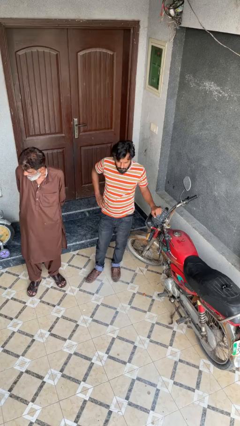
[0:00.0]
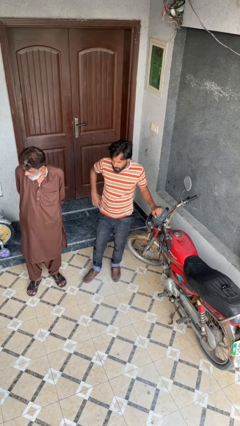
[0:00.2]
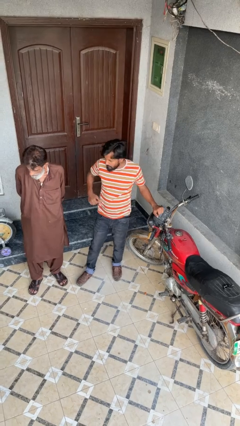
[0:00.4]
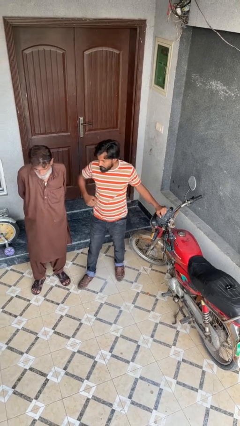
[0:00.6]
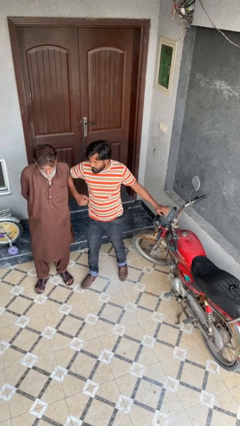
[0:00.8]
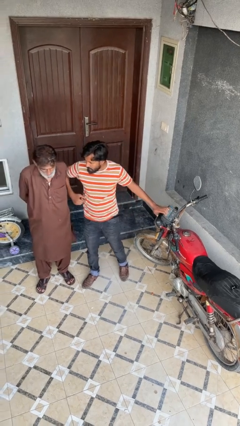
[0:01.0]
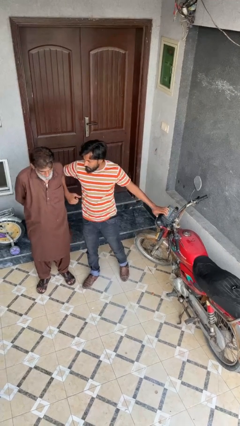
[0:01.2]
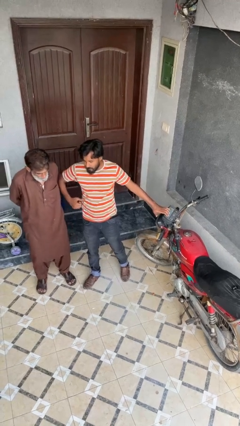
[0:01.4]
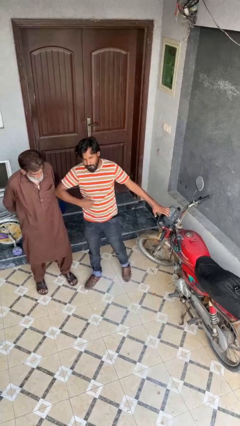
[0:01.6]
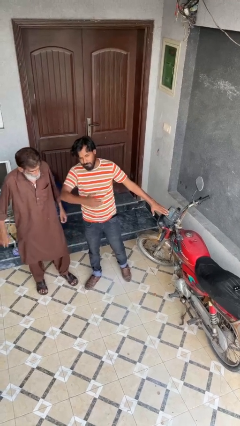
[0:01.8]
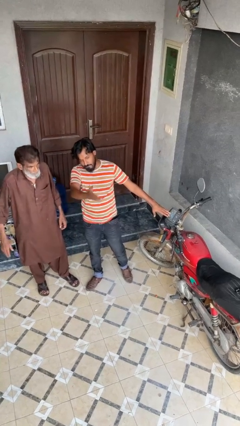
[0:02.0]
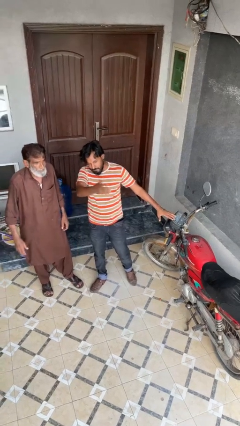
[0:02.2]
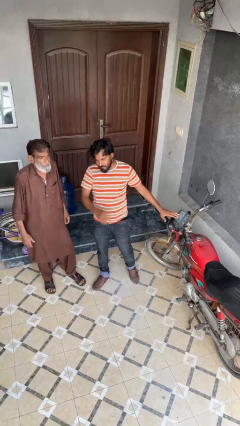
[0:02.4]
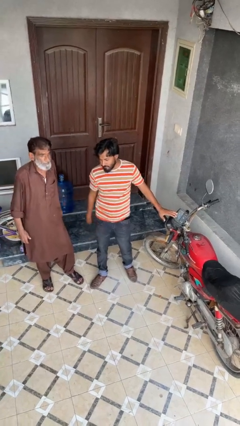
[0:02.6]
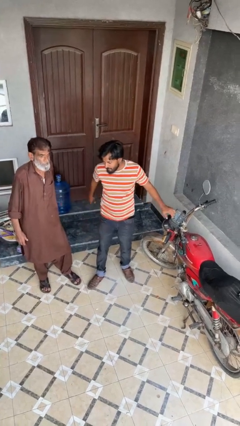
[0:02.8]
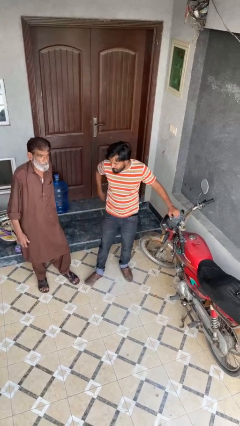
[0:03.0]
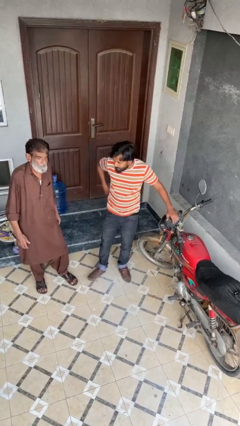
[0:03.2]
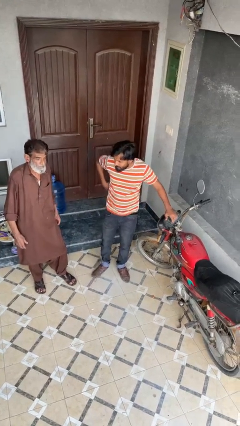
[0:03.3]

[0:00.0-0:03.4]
person nudges person with elbow

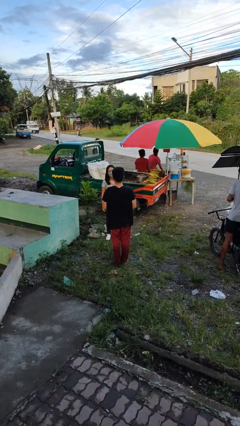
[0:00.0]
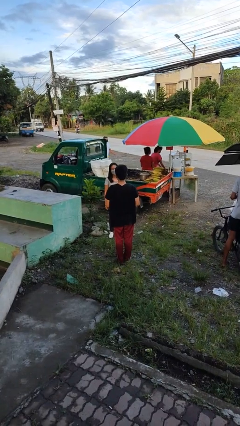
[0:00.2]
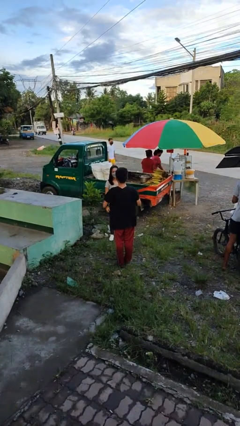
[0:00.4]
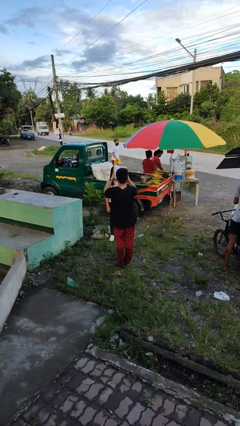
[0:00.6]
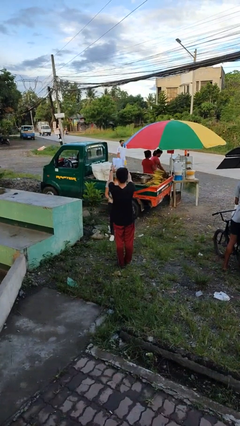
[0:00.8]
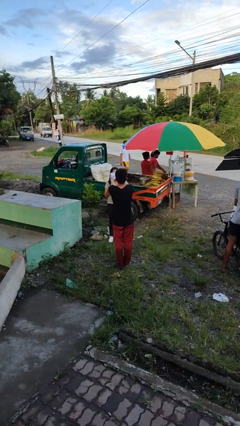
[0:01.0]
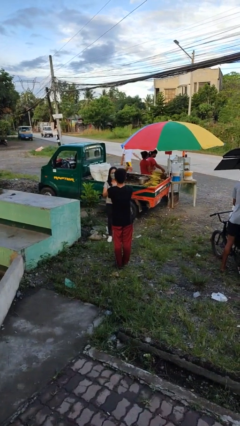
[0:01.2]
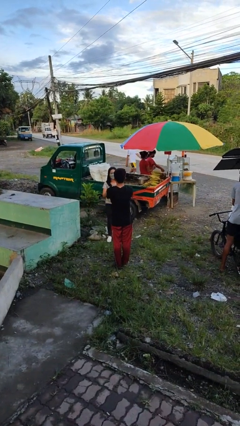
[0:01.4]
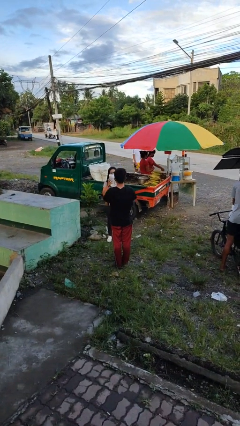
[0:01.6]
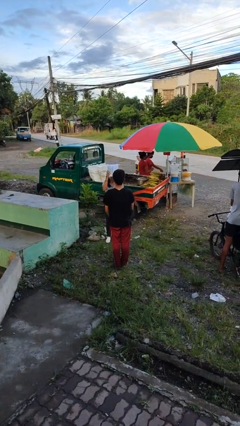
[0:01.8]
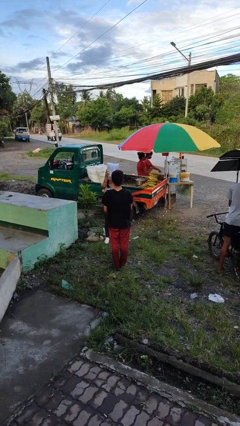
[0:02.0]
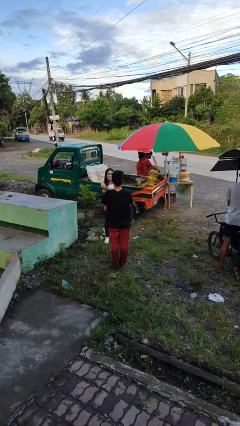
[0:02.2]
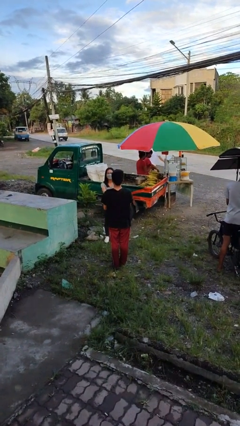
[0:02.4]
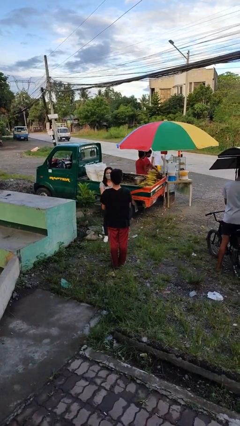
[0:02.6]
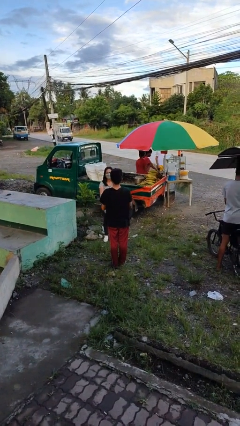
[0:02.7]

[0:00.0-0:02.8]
person transfers object to person

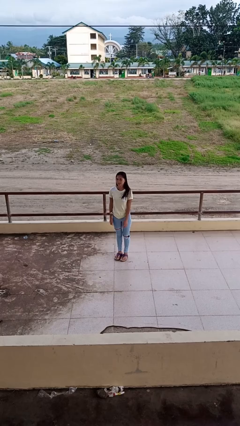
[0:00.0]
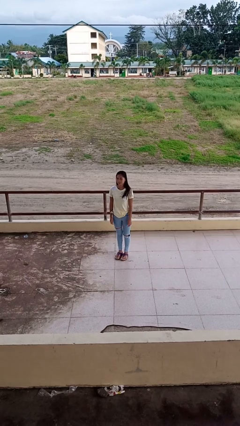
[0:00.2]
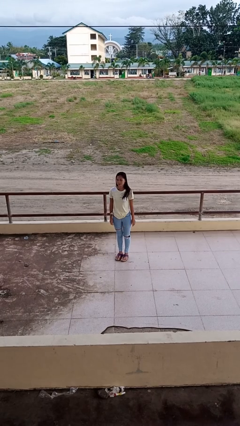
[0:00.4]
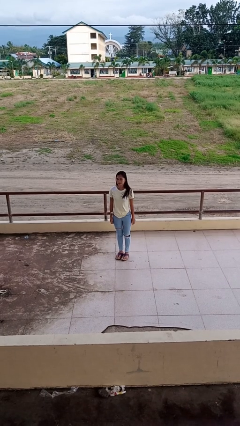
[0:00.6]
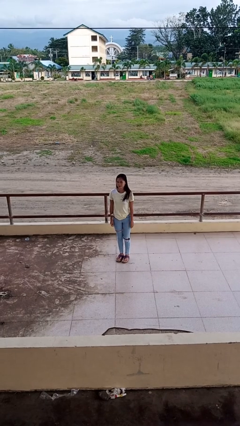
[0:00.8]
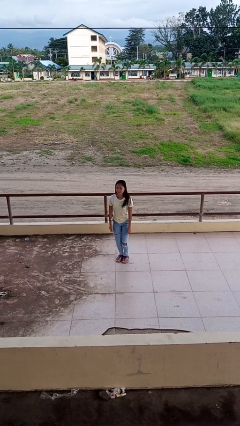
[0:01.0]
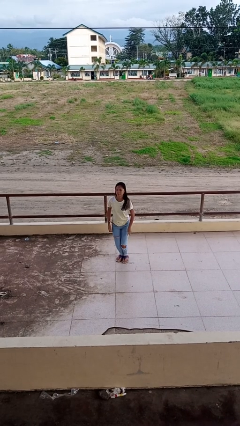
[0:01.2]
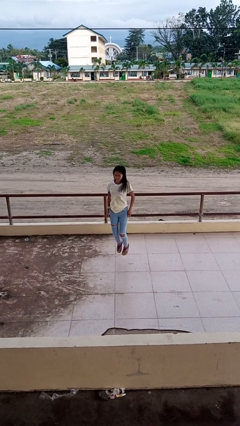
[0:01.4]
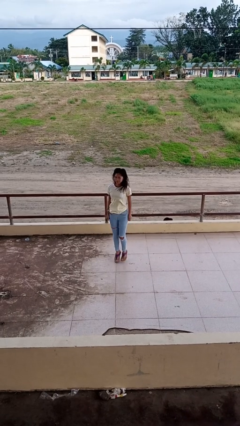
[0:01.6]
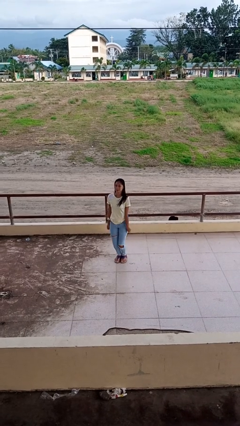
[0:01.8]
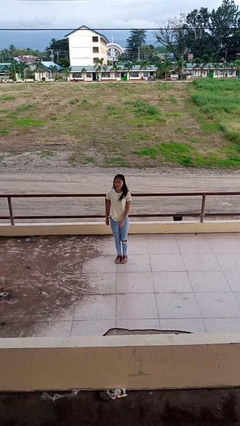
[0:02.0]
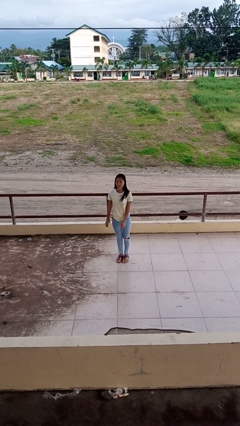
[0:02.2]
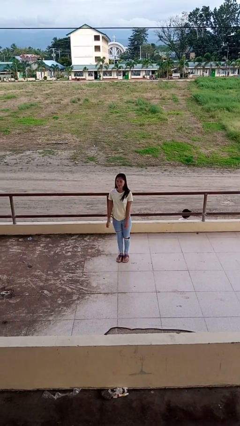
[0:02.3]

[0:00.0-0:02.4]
person jumps

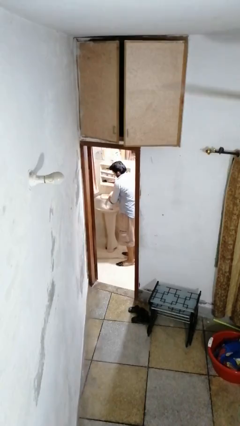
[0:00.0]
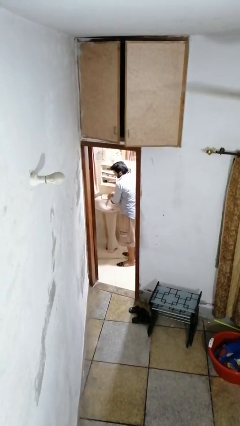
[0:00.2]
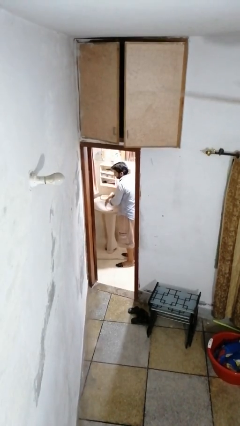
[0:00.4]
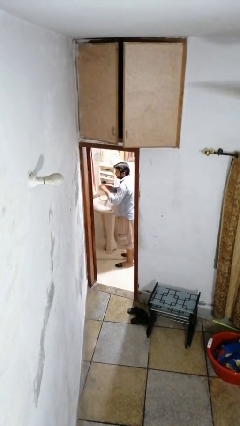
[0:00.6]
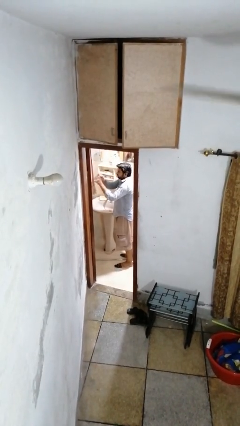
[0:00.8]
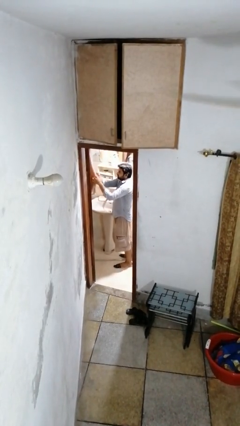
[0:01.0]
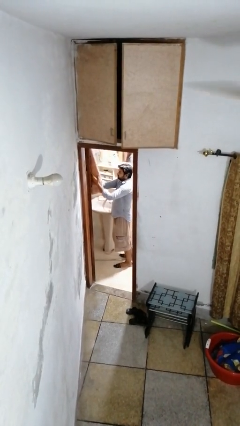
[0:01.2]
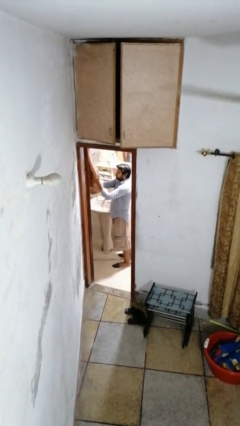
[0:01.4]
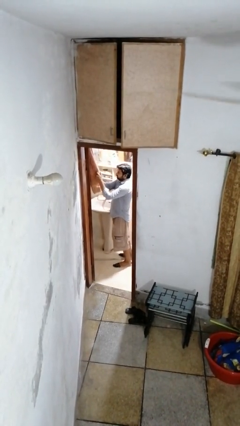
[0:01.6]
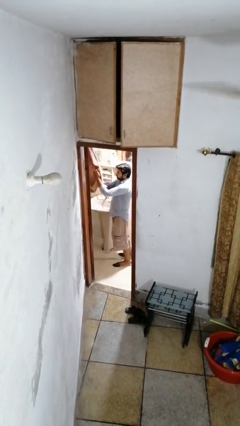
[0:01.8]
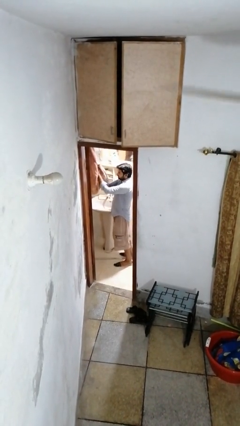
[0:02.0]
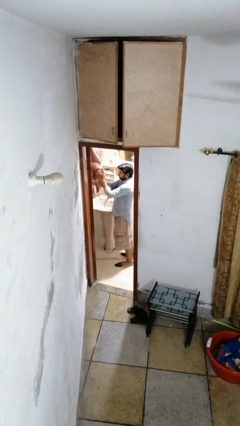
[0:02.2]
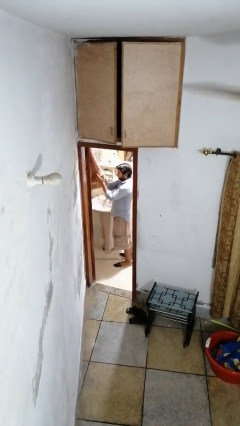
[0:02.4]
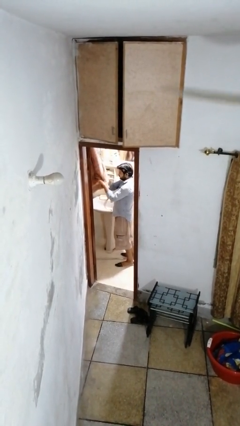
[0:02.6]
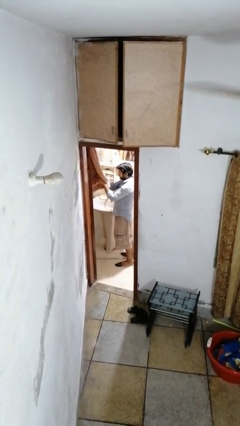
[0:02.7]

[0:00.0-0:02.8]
person dries hands with towel

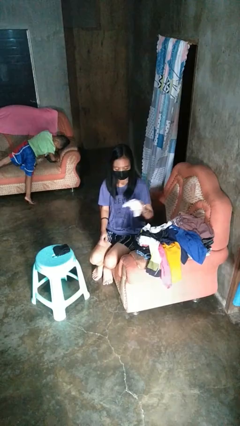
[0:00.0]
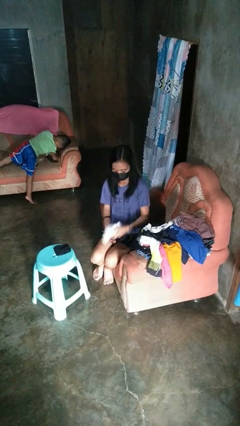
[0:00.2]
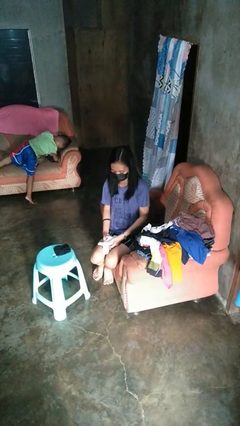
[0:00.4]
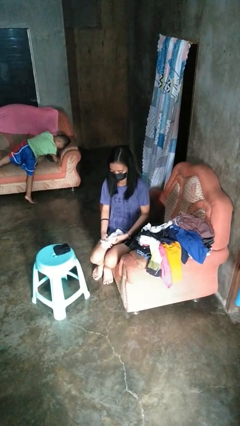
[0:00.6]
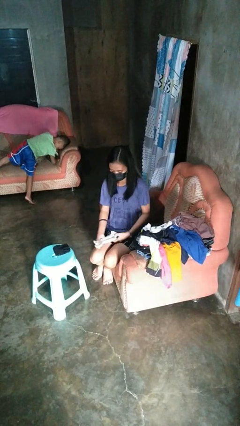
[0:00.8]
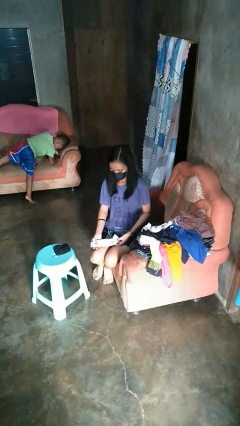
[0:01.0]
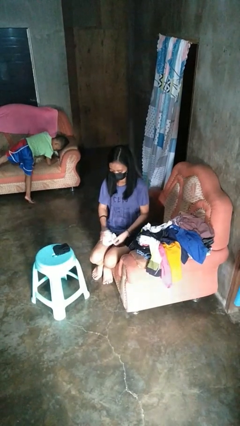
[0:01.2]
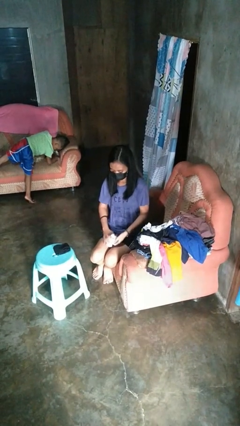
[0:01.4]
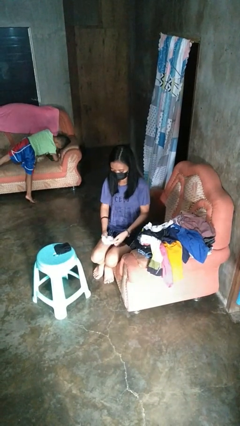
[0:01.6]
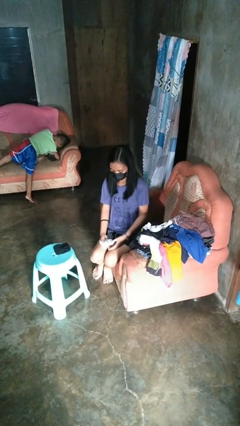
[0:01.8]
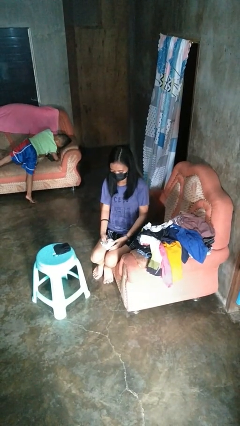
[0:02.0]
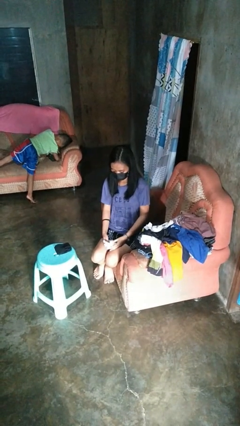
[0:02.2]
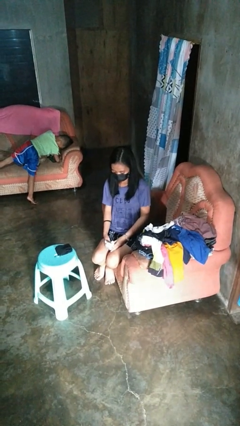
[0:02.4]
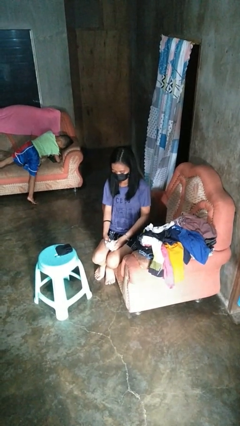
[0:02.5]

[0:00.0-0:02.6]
person folds socks

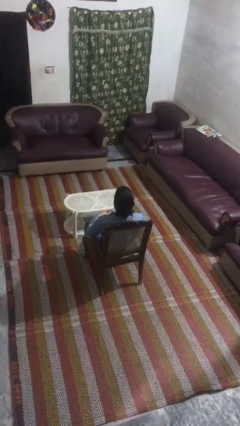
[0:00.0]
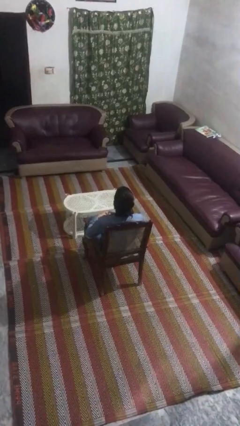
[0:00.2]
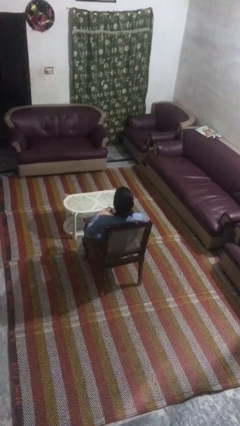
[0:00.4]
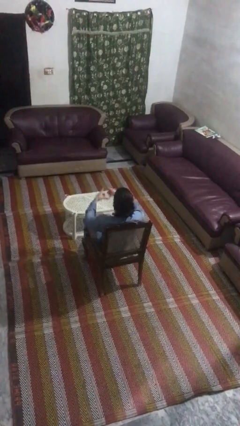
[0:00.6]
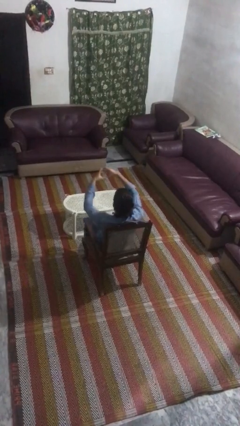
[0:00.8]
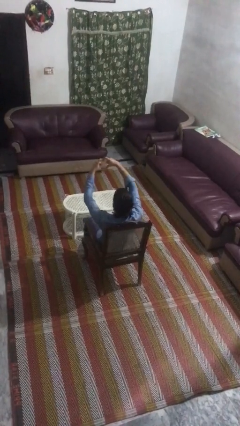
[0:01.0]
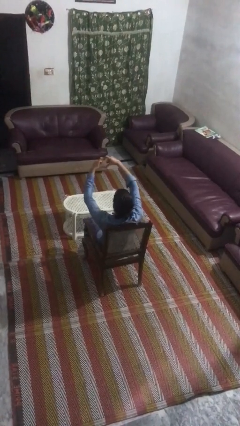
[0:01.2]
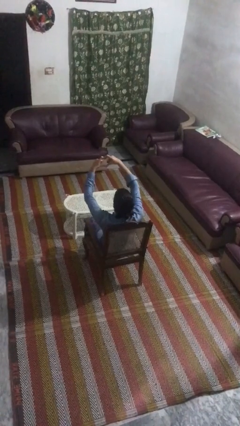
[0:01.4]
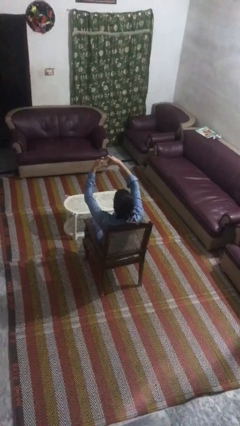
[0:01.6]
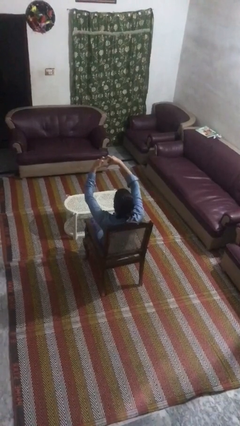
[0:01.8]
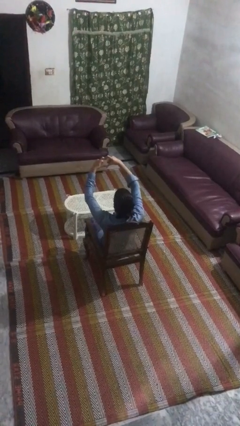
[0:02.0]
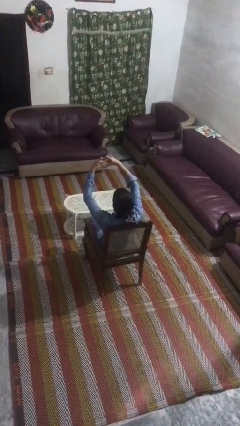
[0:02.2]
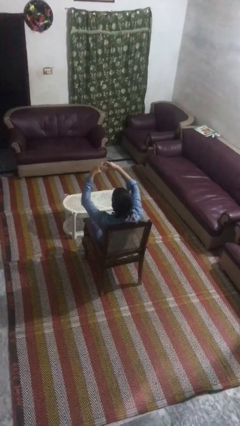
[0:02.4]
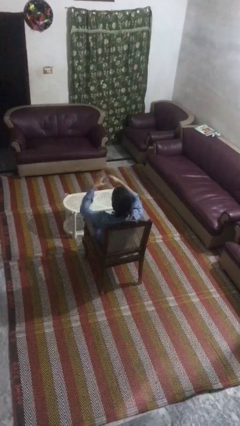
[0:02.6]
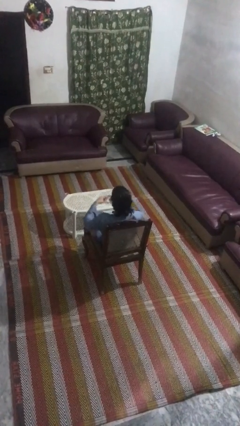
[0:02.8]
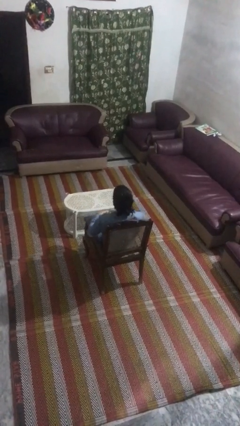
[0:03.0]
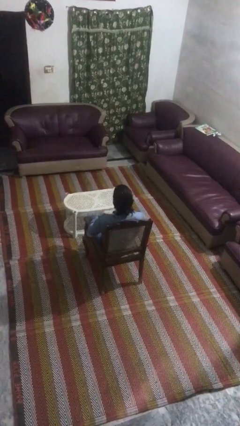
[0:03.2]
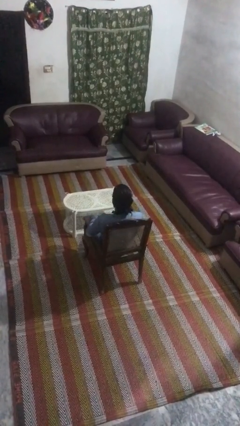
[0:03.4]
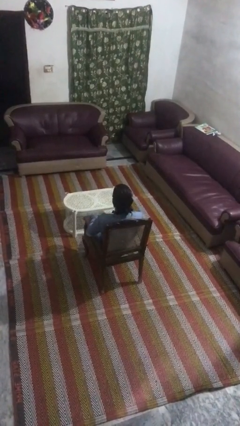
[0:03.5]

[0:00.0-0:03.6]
person gestures heart
